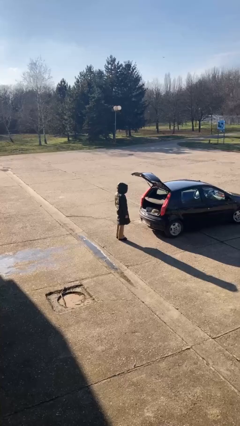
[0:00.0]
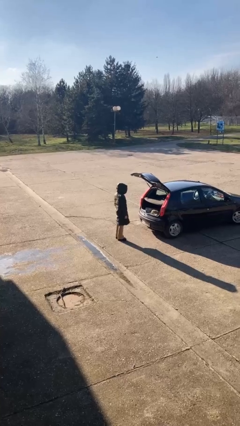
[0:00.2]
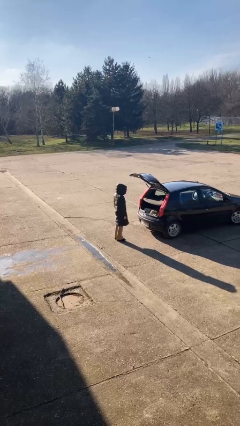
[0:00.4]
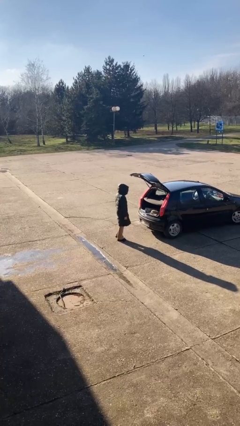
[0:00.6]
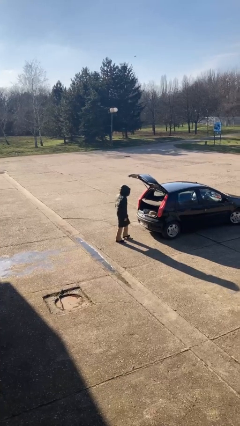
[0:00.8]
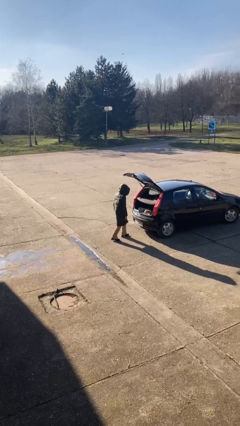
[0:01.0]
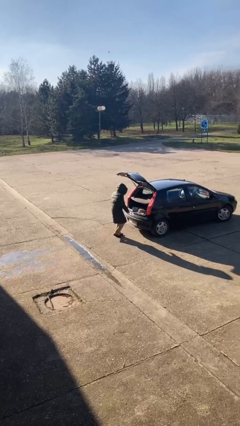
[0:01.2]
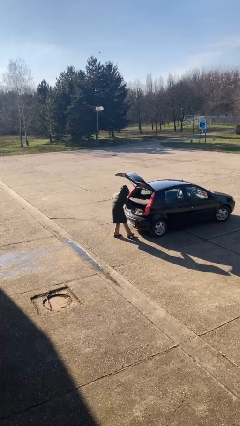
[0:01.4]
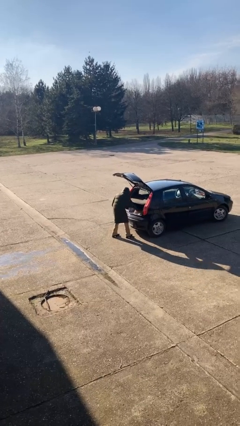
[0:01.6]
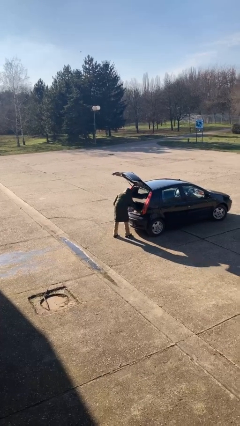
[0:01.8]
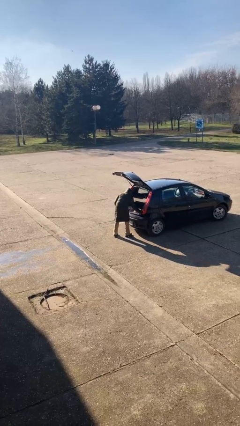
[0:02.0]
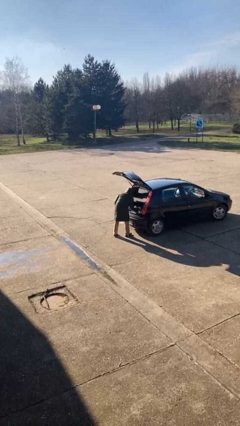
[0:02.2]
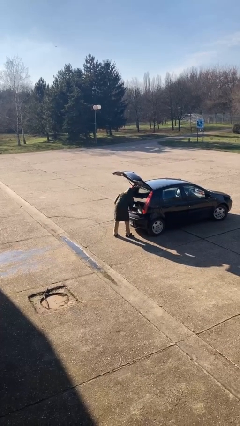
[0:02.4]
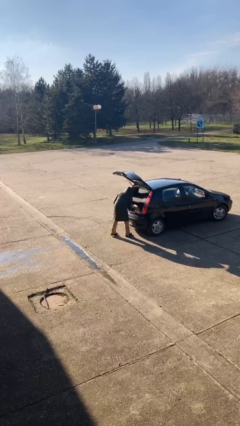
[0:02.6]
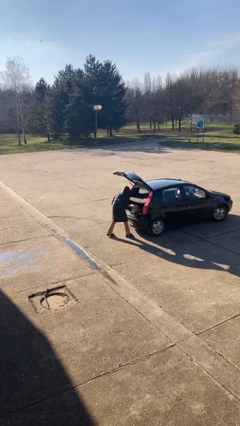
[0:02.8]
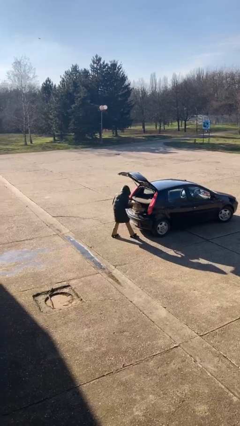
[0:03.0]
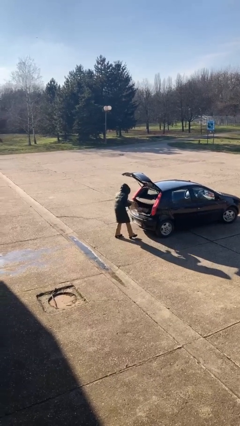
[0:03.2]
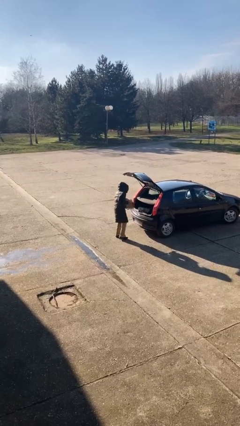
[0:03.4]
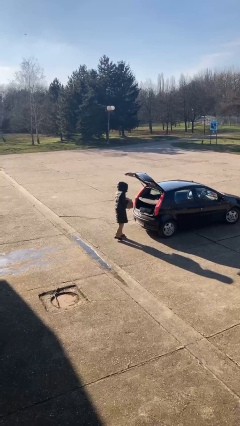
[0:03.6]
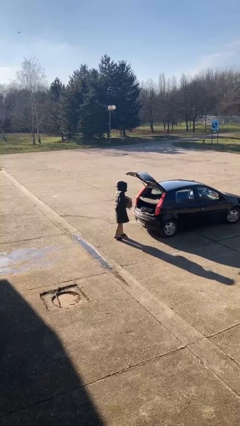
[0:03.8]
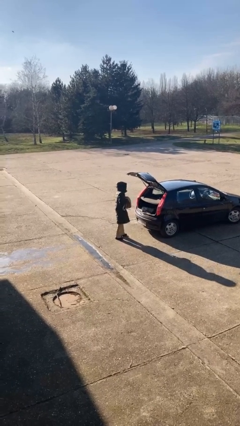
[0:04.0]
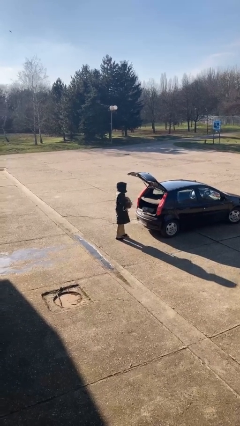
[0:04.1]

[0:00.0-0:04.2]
person unloads car

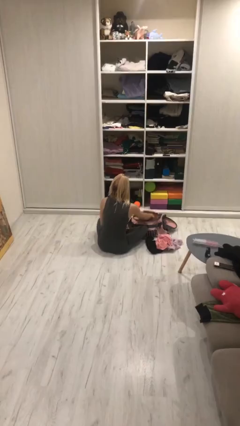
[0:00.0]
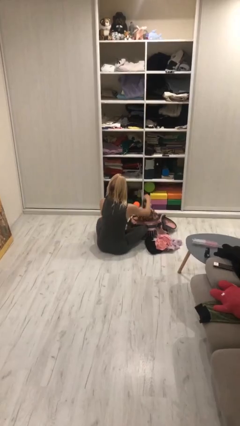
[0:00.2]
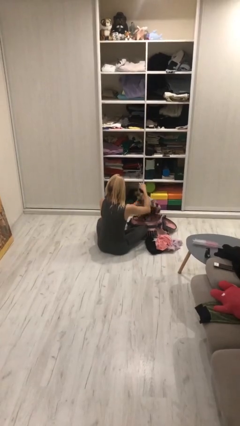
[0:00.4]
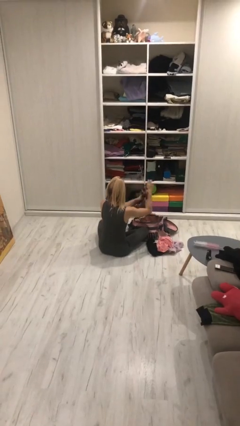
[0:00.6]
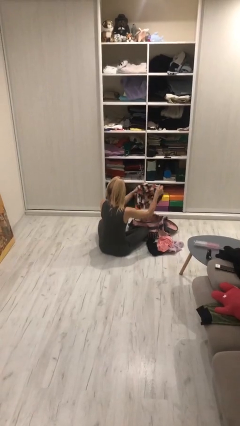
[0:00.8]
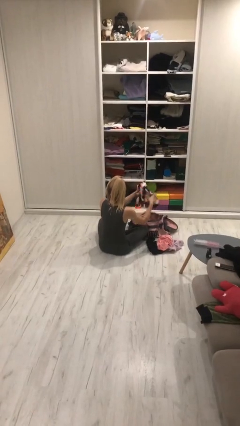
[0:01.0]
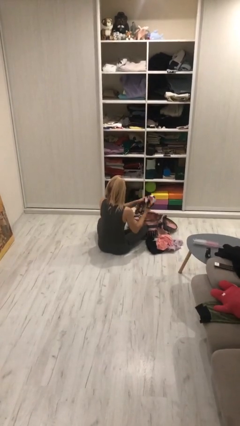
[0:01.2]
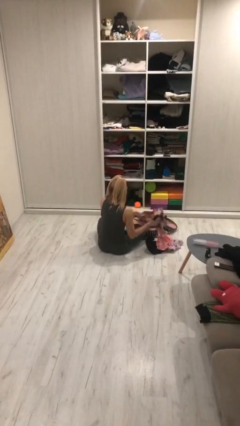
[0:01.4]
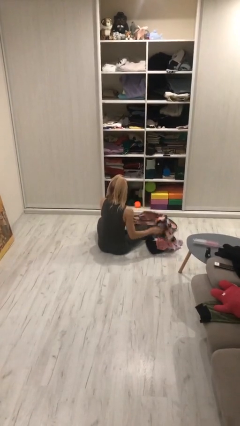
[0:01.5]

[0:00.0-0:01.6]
person unloads clothes from suitcase

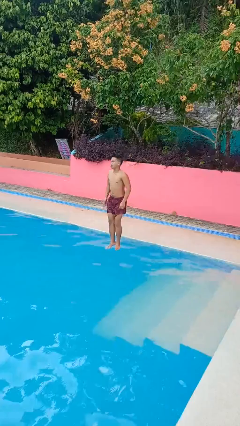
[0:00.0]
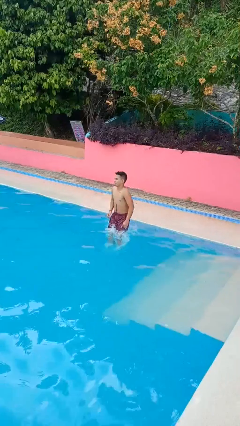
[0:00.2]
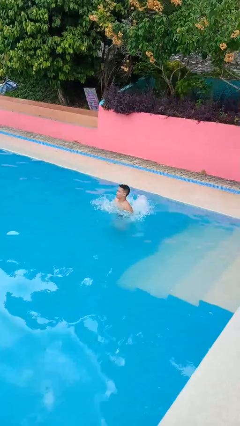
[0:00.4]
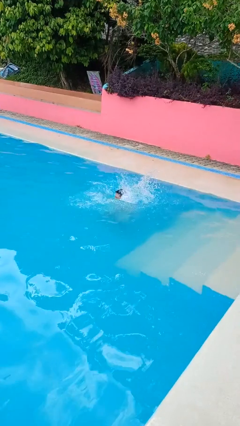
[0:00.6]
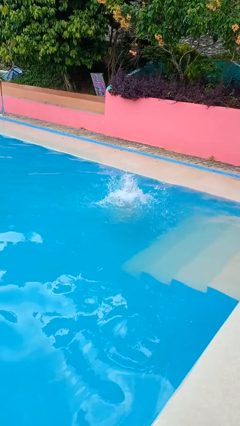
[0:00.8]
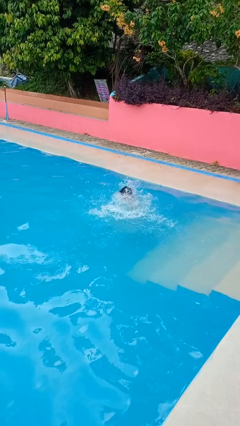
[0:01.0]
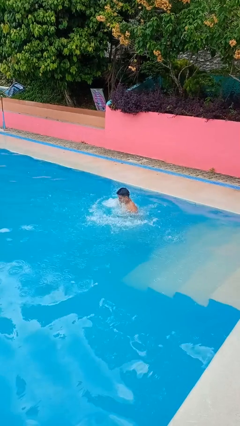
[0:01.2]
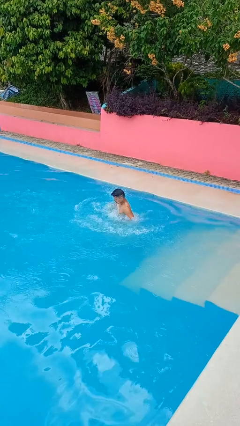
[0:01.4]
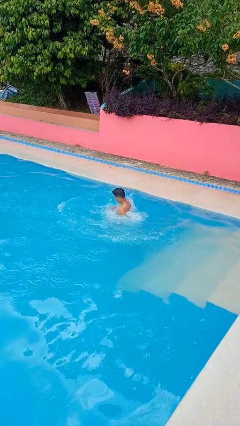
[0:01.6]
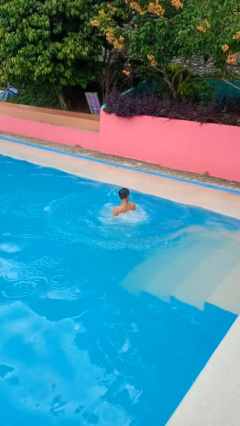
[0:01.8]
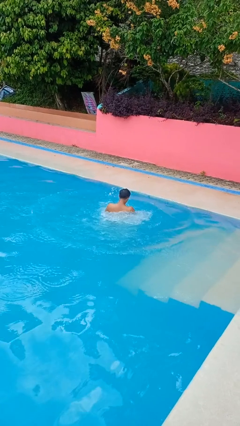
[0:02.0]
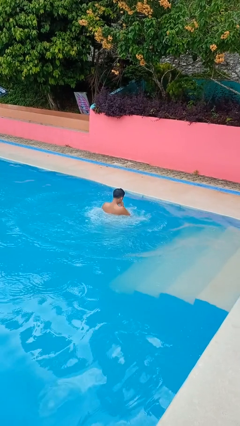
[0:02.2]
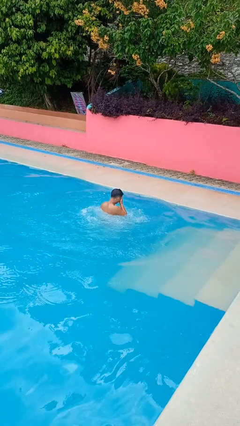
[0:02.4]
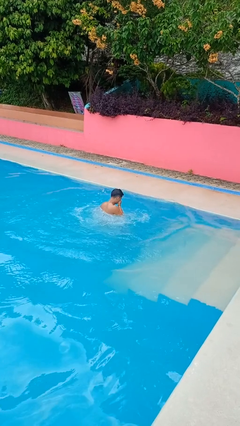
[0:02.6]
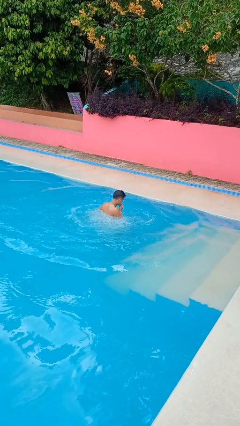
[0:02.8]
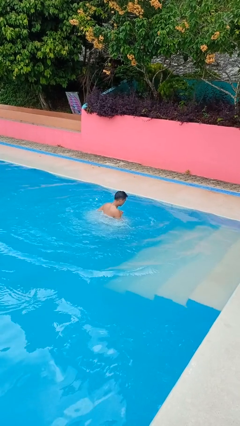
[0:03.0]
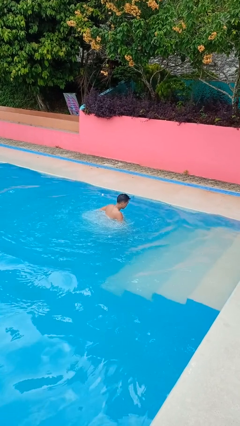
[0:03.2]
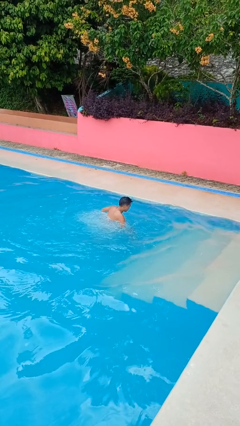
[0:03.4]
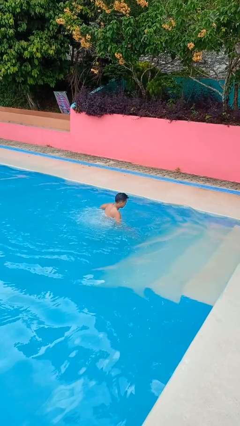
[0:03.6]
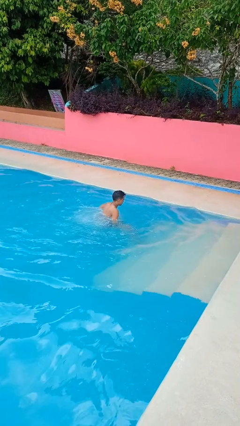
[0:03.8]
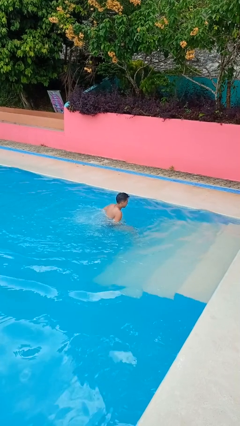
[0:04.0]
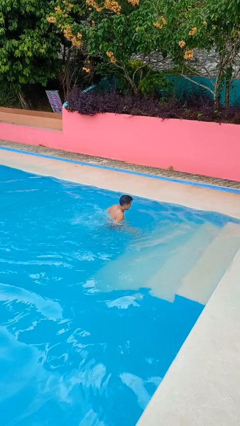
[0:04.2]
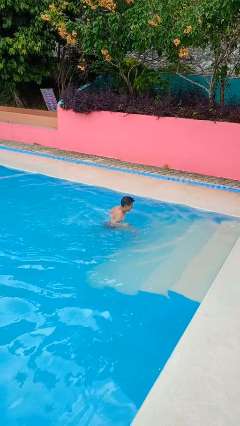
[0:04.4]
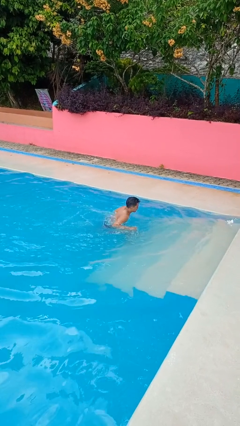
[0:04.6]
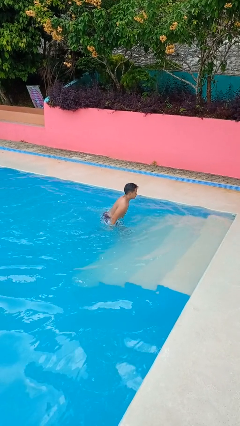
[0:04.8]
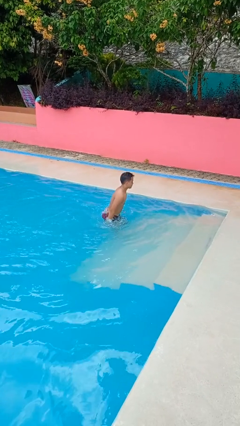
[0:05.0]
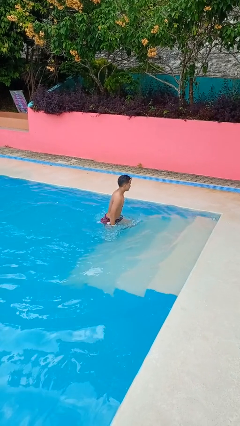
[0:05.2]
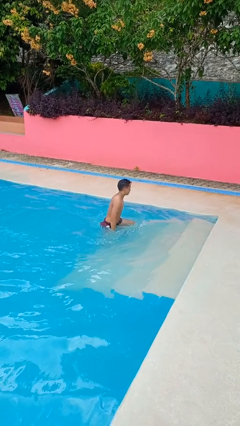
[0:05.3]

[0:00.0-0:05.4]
person jumps into pool

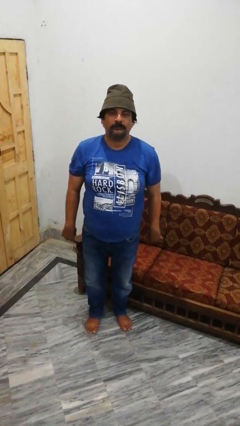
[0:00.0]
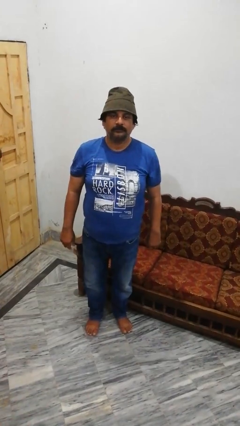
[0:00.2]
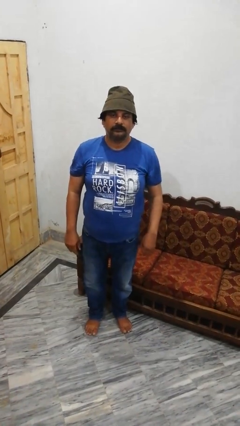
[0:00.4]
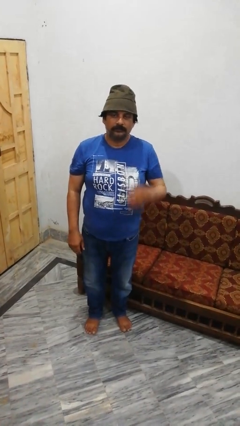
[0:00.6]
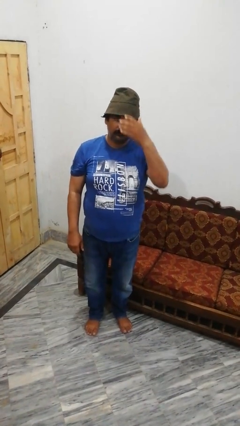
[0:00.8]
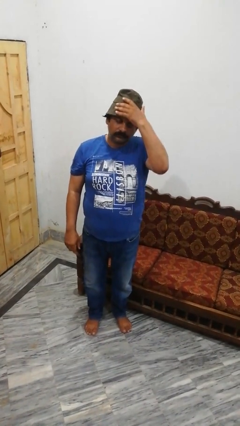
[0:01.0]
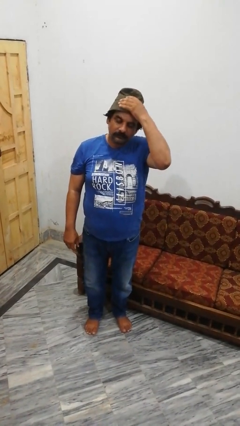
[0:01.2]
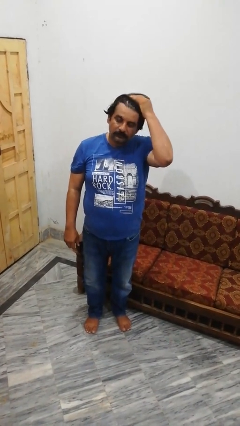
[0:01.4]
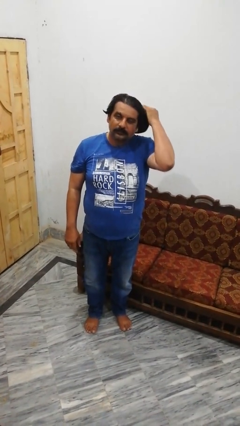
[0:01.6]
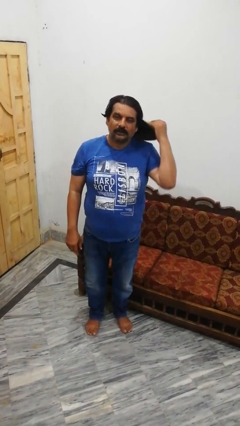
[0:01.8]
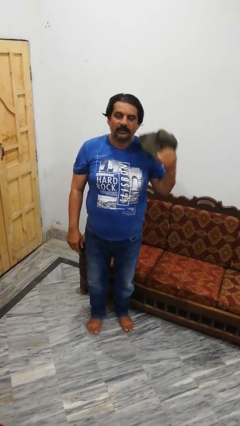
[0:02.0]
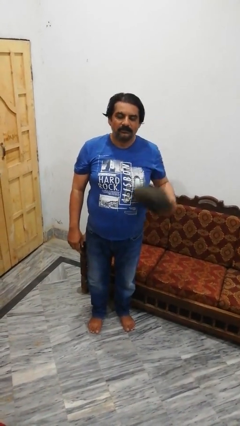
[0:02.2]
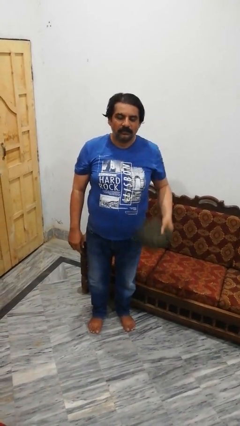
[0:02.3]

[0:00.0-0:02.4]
person takes off hat

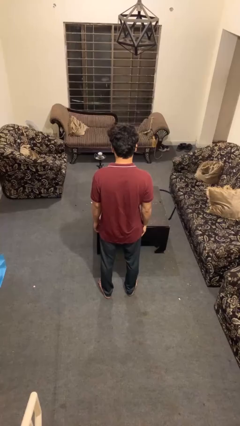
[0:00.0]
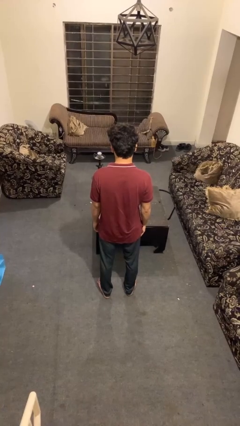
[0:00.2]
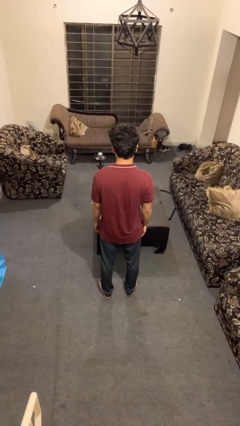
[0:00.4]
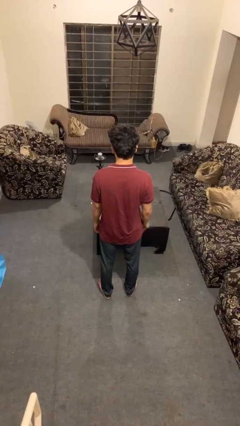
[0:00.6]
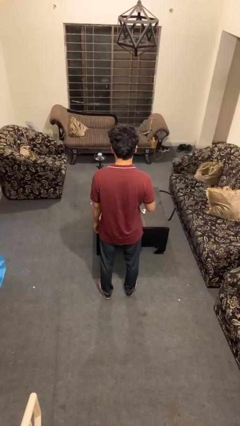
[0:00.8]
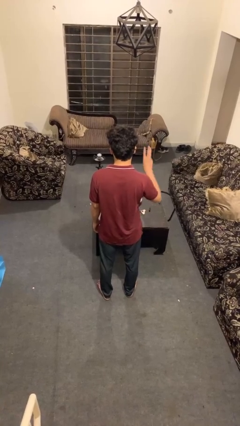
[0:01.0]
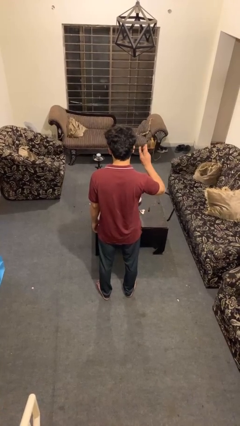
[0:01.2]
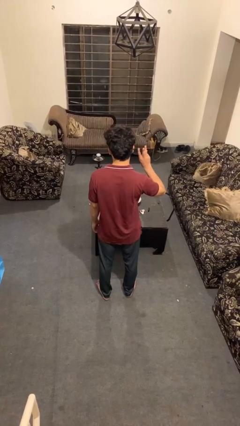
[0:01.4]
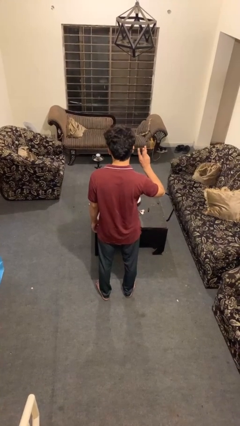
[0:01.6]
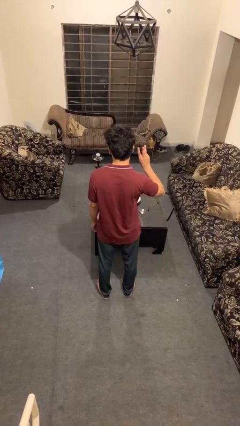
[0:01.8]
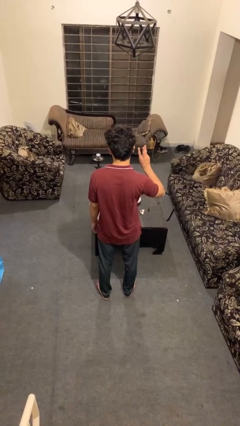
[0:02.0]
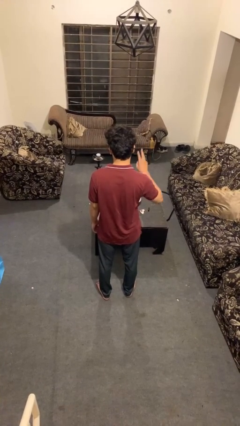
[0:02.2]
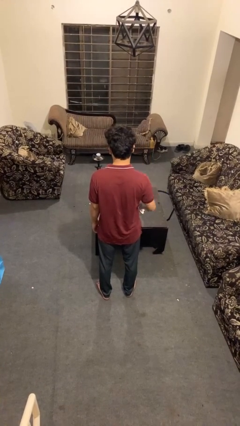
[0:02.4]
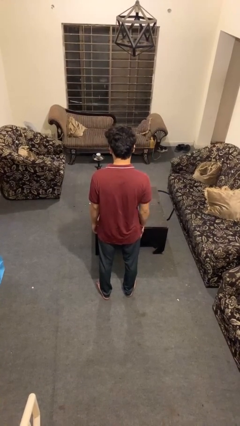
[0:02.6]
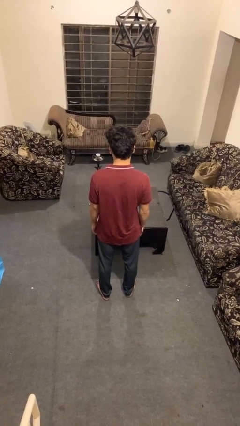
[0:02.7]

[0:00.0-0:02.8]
person gestures number three

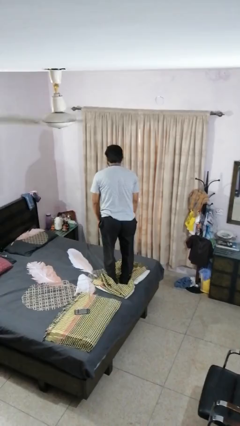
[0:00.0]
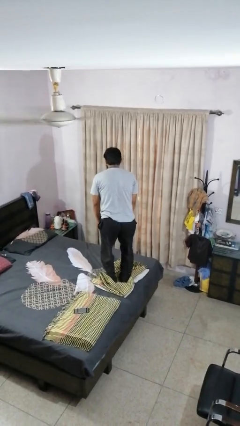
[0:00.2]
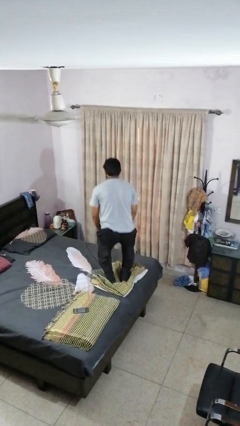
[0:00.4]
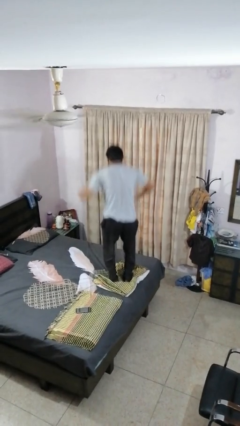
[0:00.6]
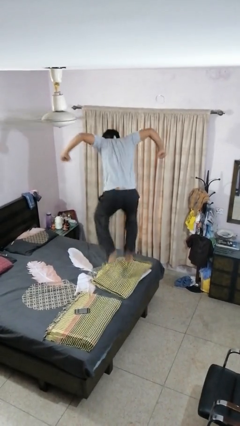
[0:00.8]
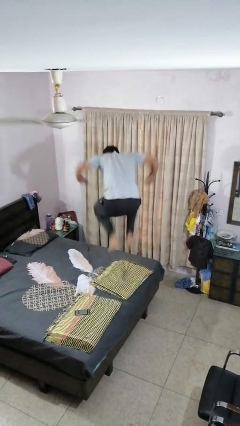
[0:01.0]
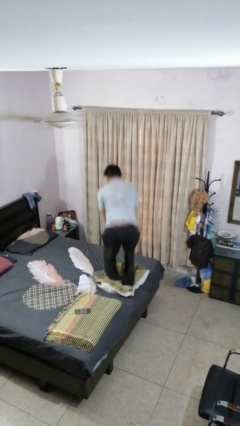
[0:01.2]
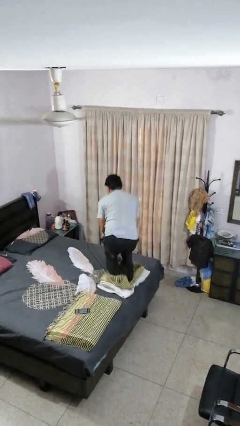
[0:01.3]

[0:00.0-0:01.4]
person jumps on bed
